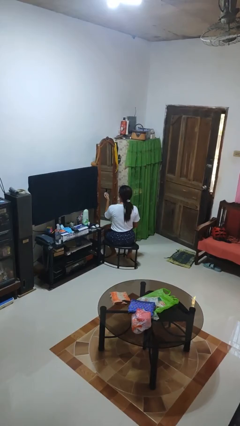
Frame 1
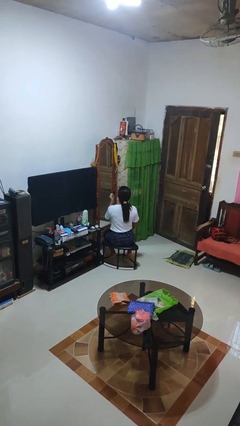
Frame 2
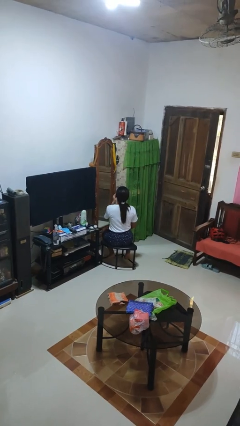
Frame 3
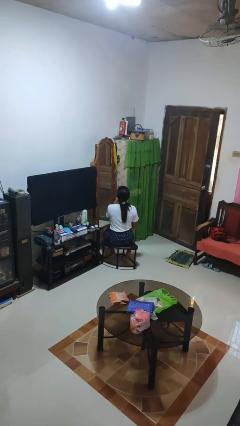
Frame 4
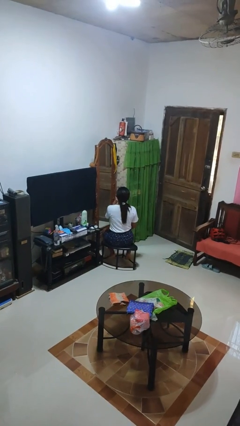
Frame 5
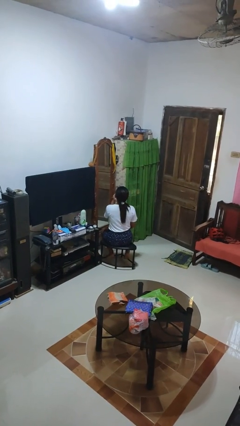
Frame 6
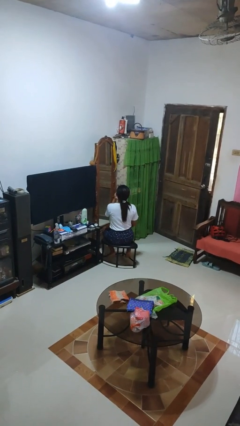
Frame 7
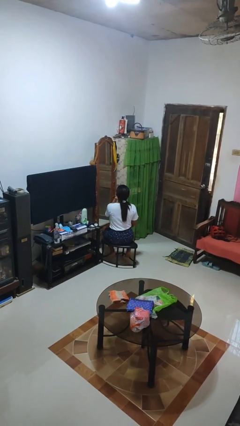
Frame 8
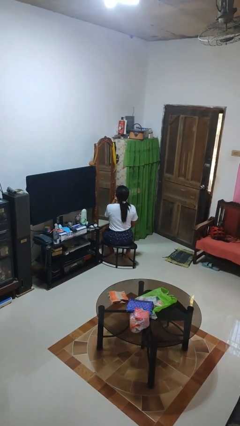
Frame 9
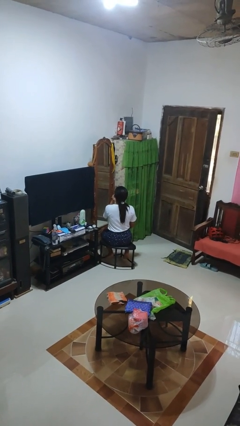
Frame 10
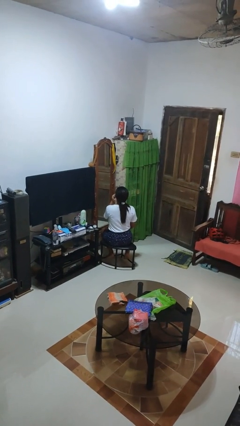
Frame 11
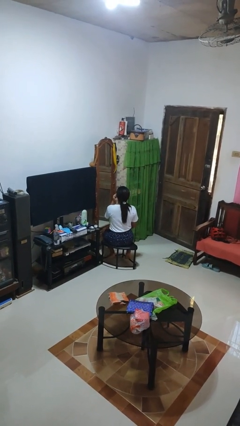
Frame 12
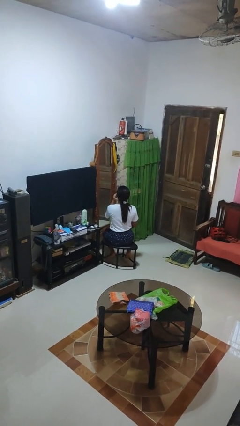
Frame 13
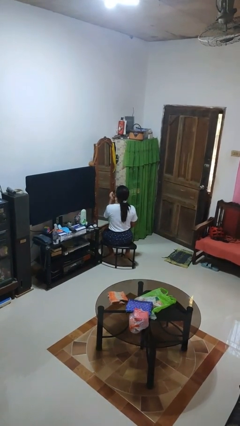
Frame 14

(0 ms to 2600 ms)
person applies lip makeup

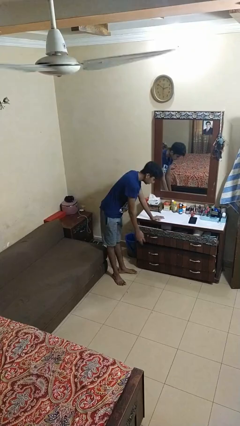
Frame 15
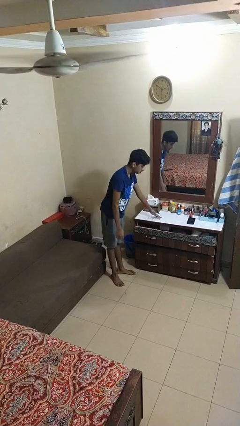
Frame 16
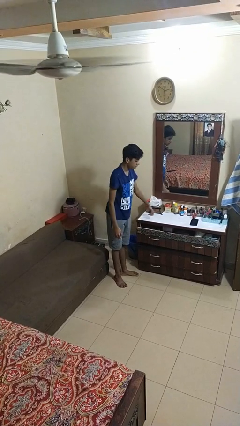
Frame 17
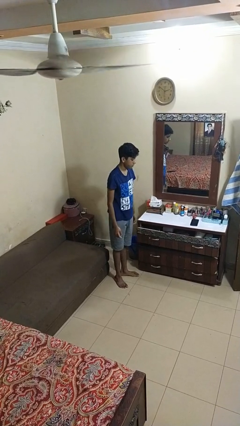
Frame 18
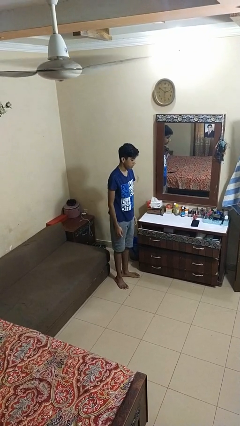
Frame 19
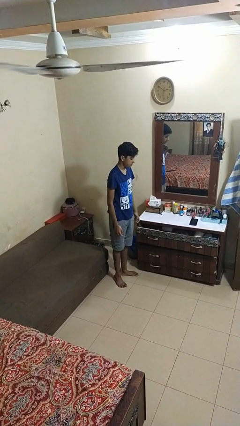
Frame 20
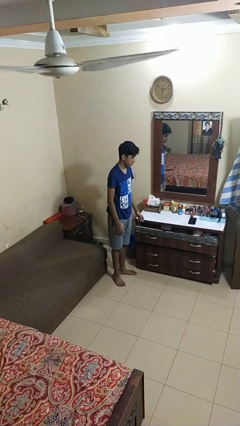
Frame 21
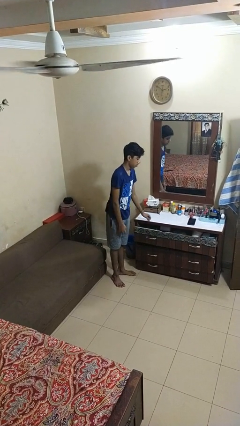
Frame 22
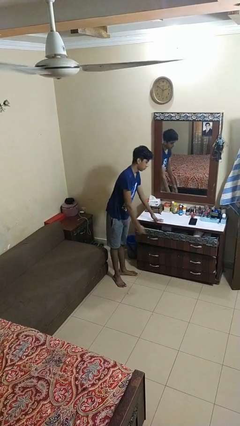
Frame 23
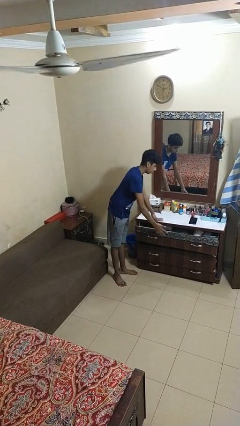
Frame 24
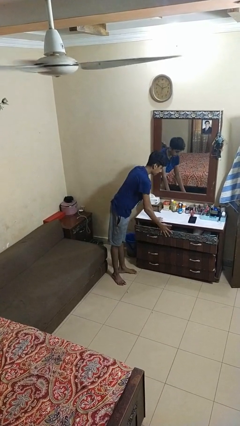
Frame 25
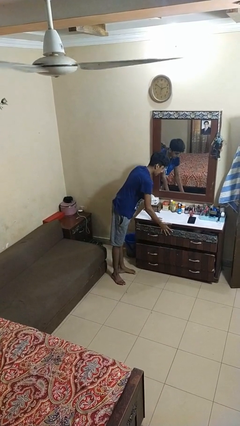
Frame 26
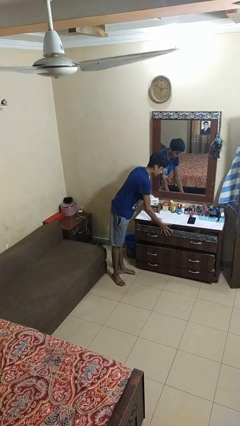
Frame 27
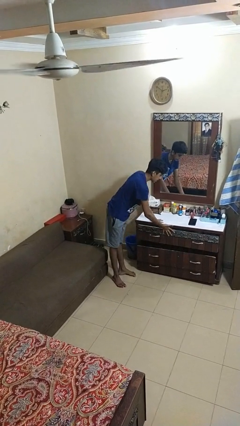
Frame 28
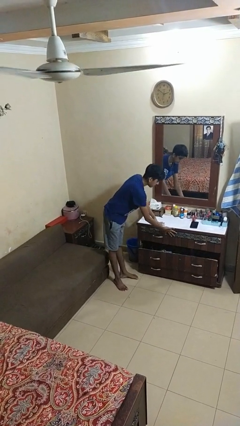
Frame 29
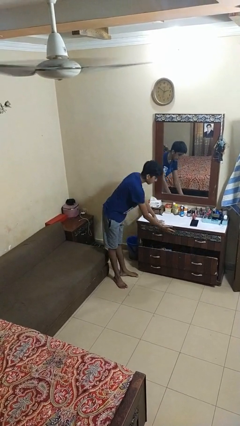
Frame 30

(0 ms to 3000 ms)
person closes dresser drawer

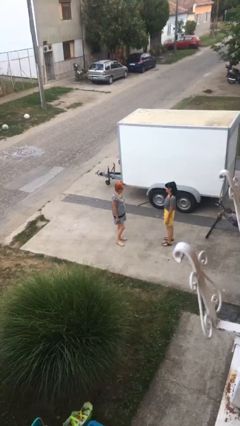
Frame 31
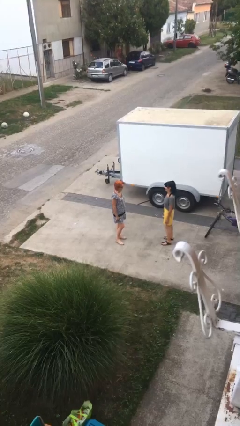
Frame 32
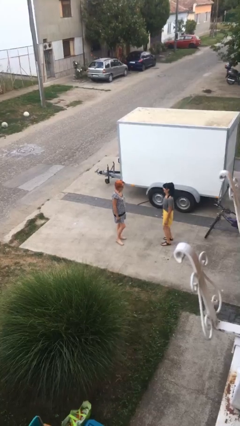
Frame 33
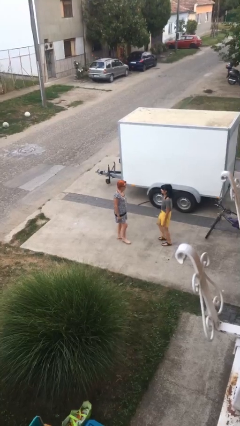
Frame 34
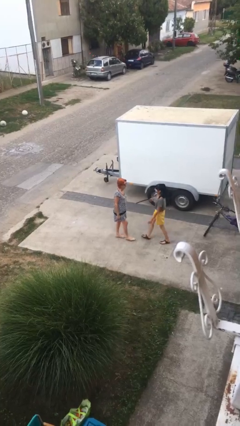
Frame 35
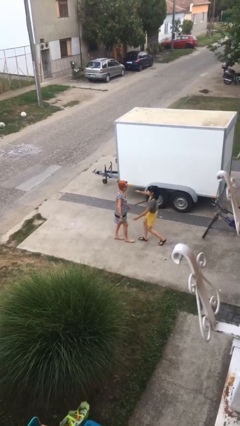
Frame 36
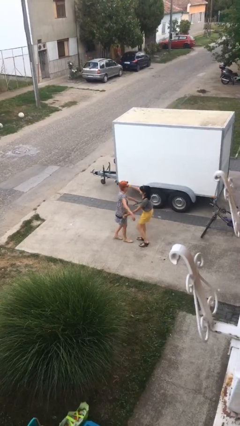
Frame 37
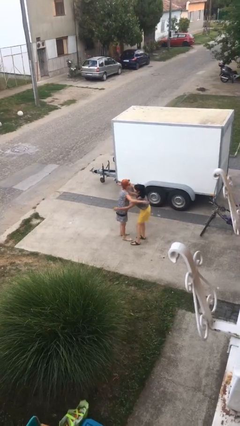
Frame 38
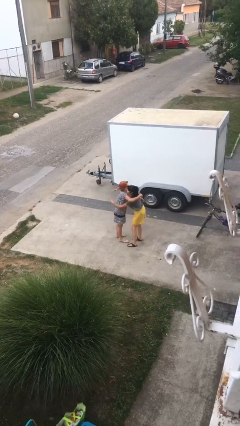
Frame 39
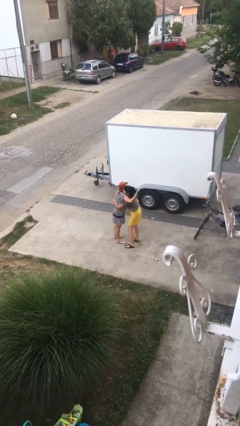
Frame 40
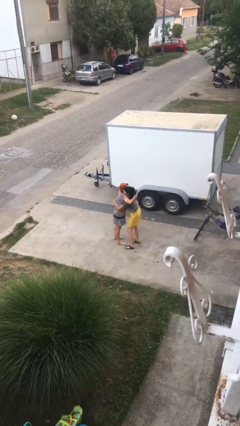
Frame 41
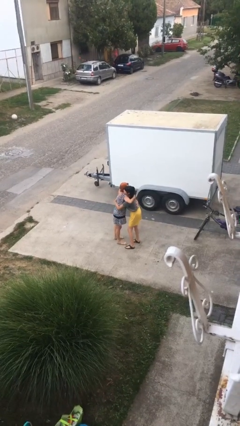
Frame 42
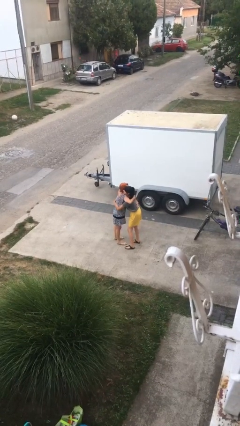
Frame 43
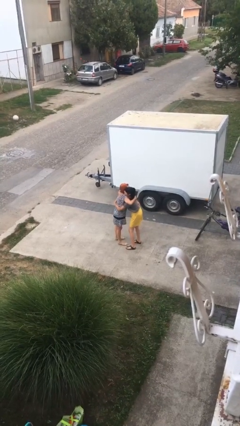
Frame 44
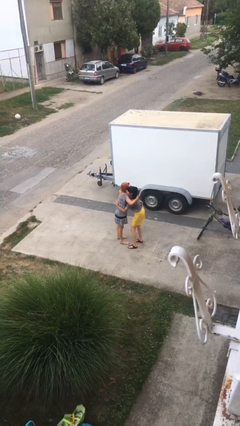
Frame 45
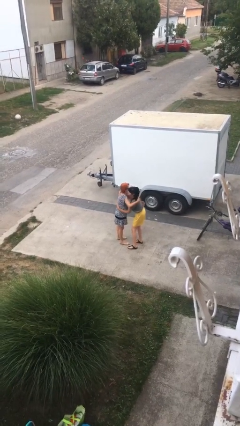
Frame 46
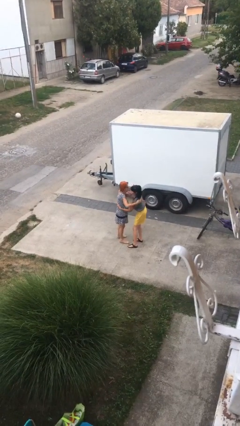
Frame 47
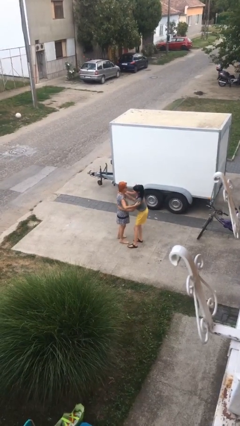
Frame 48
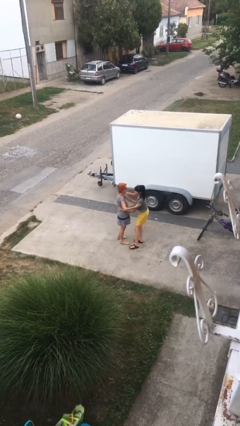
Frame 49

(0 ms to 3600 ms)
person embraces person

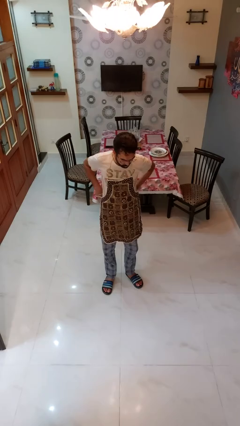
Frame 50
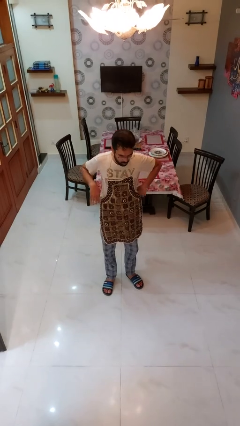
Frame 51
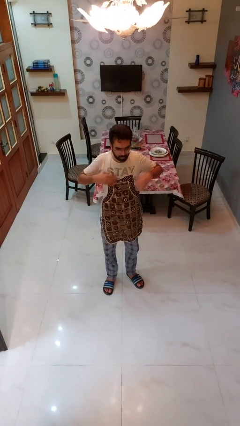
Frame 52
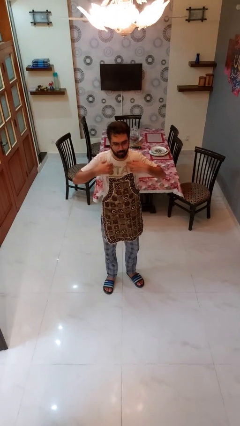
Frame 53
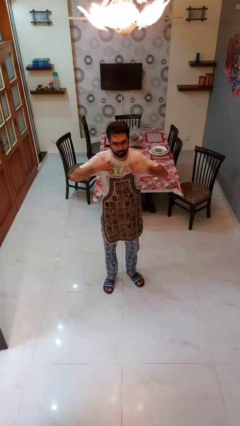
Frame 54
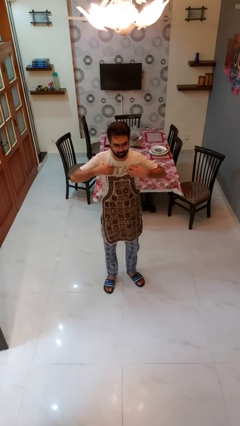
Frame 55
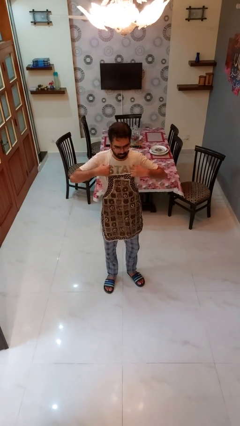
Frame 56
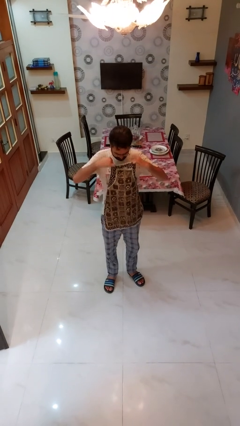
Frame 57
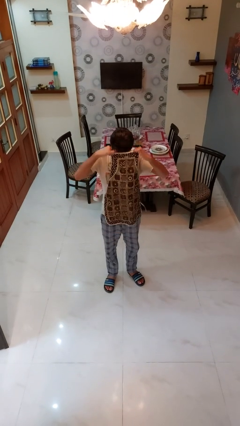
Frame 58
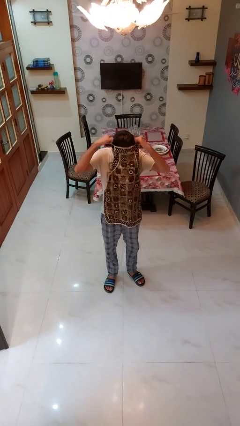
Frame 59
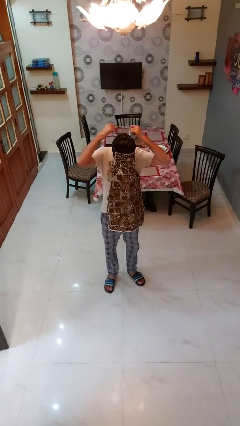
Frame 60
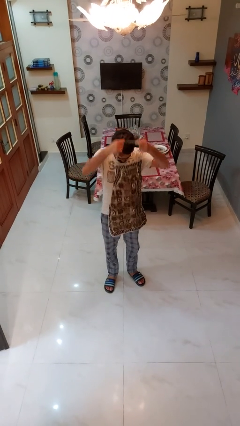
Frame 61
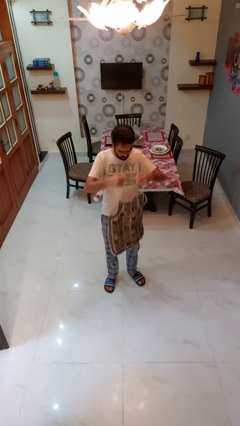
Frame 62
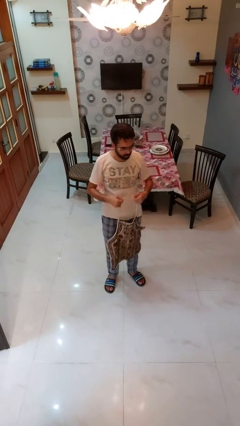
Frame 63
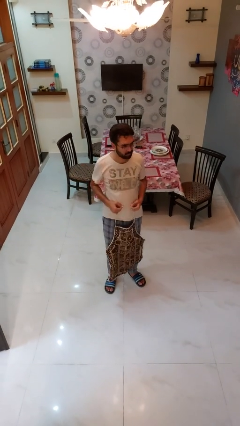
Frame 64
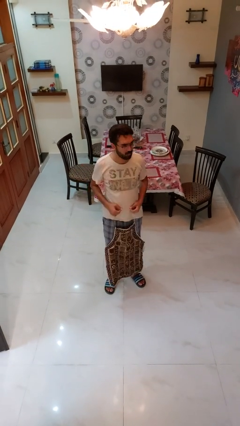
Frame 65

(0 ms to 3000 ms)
person takes off apron

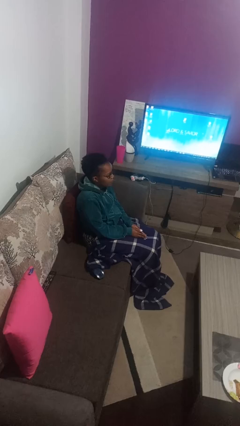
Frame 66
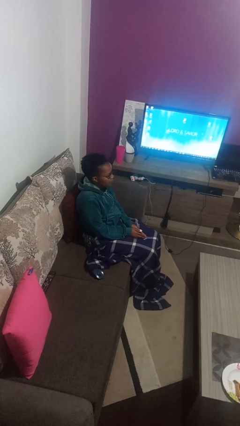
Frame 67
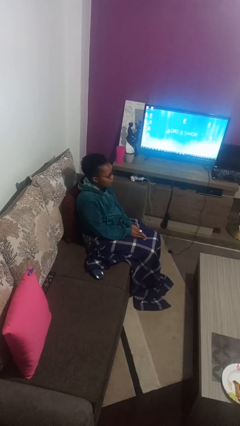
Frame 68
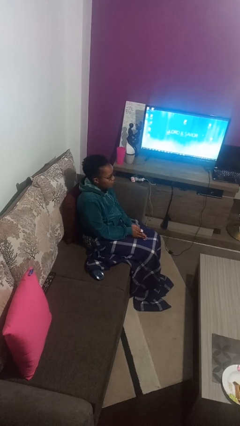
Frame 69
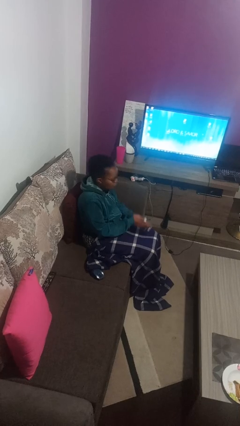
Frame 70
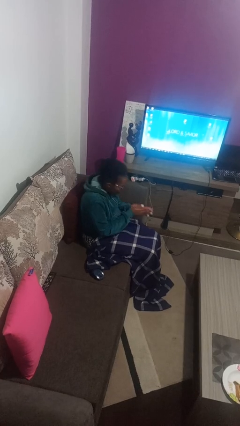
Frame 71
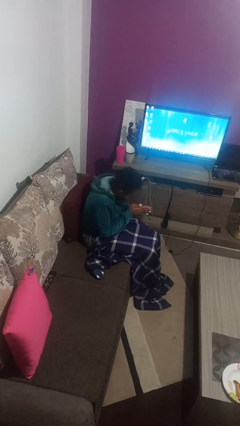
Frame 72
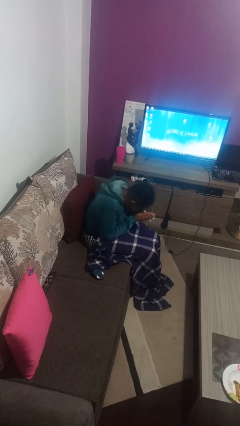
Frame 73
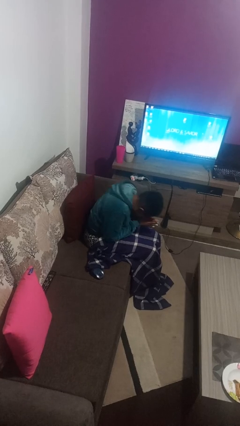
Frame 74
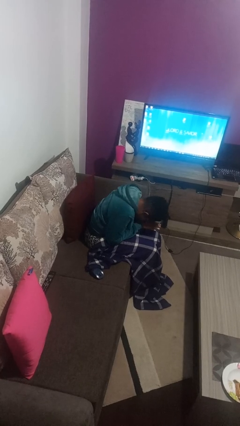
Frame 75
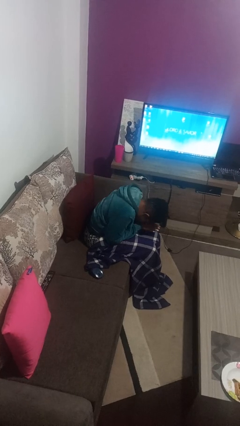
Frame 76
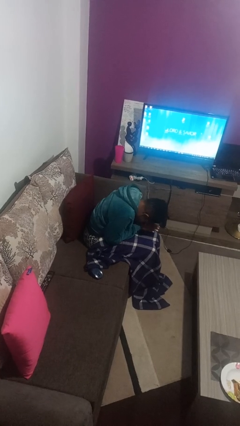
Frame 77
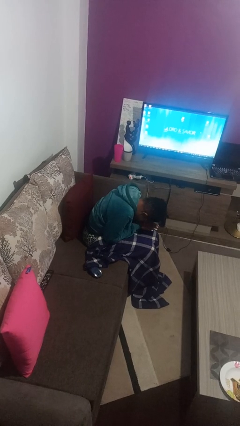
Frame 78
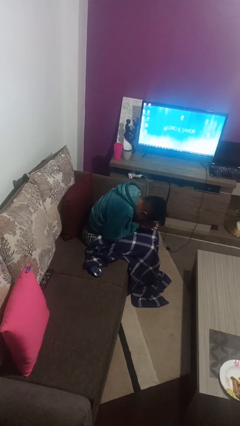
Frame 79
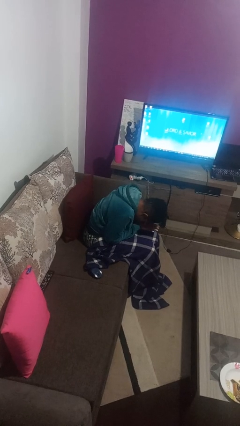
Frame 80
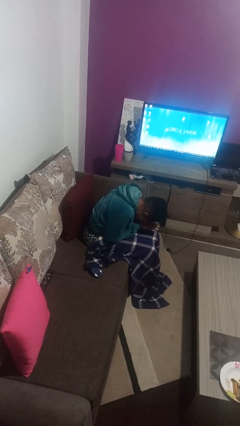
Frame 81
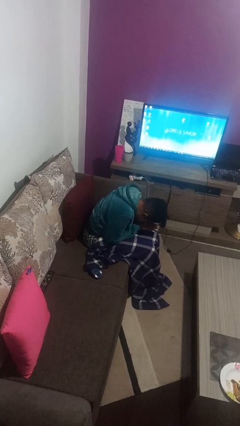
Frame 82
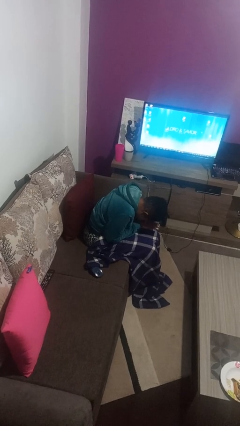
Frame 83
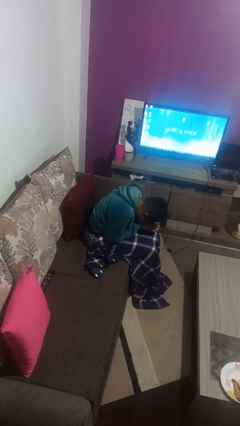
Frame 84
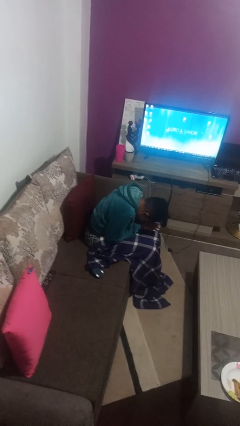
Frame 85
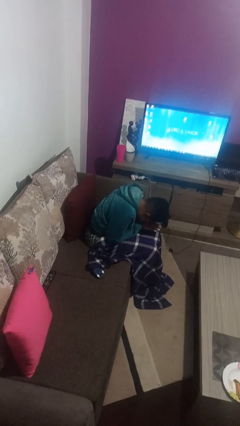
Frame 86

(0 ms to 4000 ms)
person prays

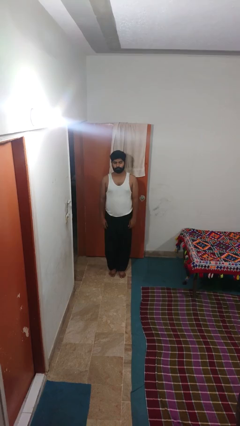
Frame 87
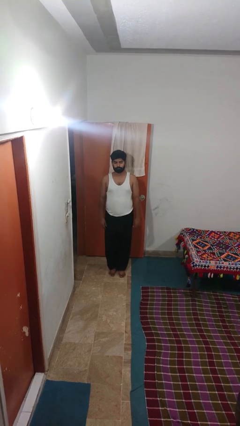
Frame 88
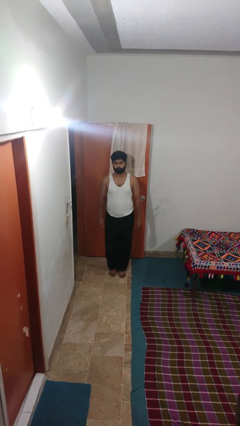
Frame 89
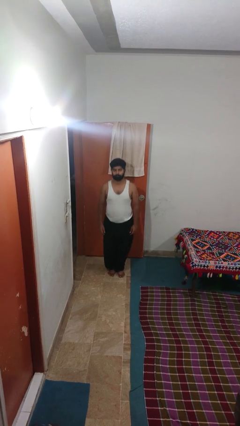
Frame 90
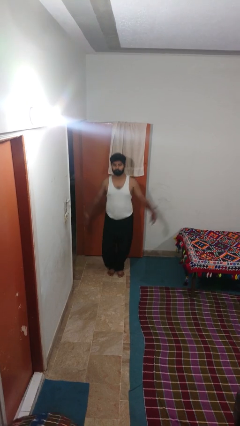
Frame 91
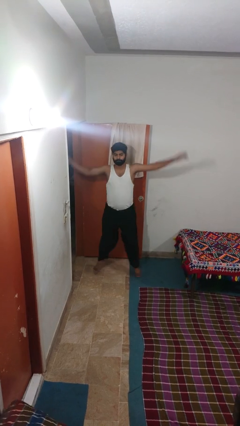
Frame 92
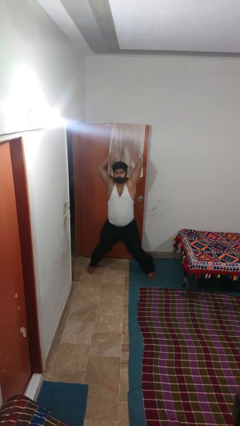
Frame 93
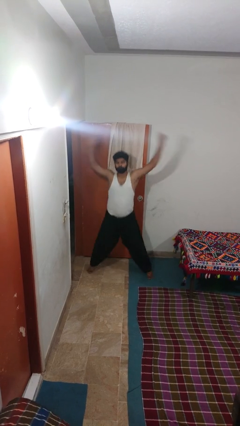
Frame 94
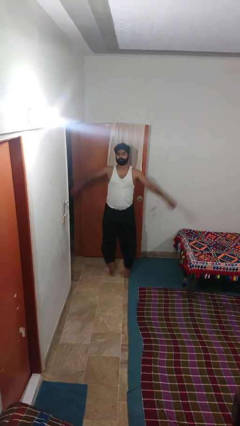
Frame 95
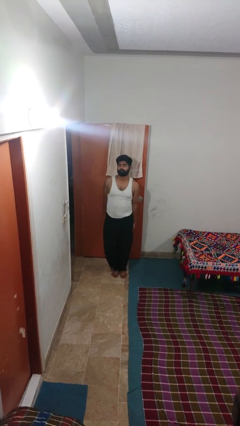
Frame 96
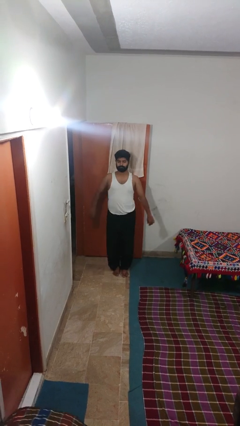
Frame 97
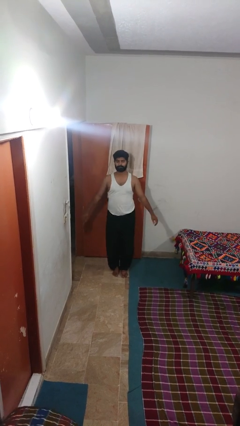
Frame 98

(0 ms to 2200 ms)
person exercises with jumping jacks
